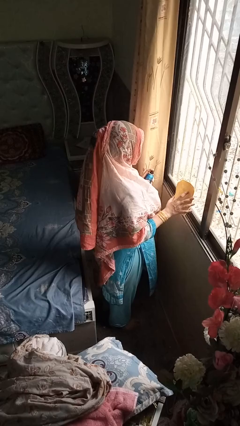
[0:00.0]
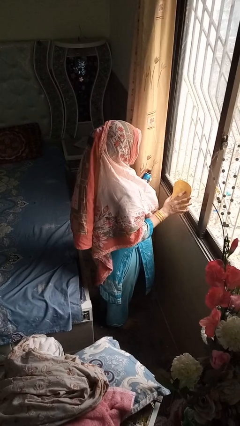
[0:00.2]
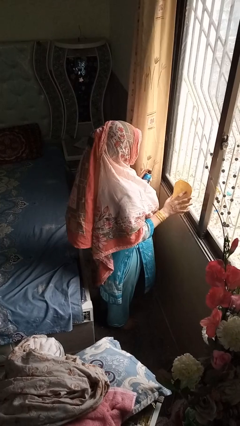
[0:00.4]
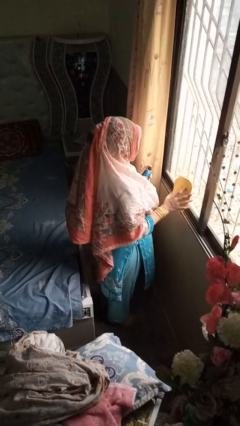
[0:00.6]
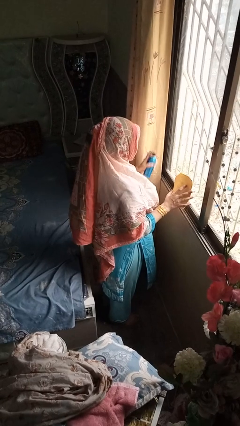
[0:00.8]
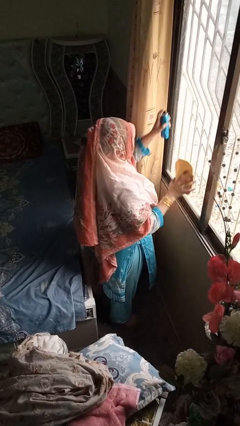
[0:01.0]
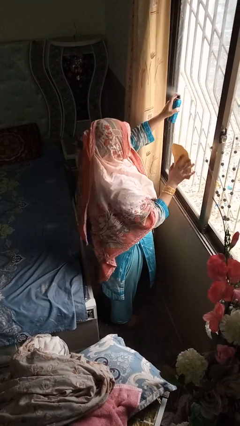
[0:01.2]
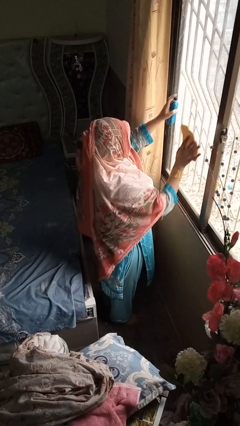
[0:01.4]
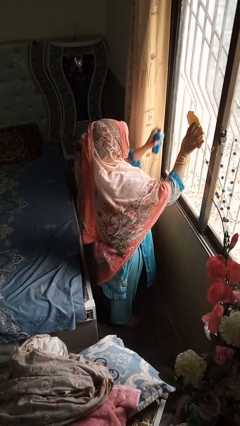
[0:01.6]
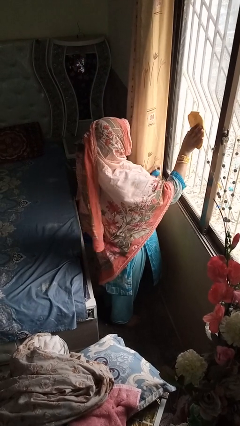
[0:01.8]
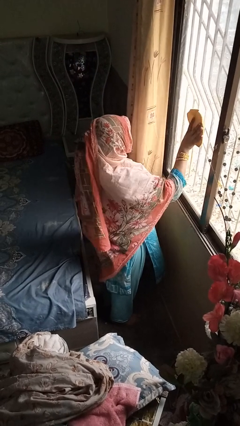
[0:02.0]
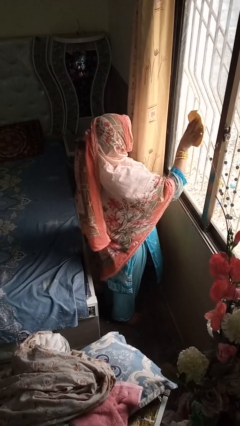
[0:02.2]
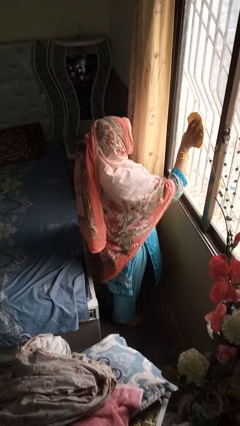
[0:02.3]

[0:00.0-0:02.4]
person sprays from bottle

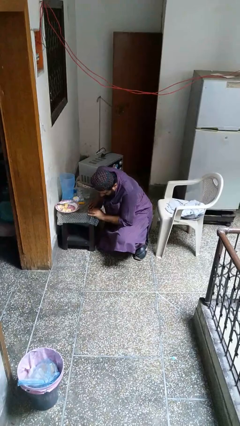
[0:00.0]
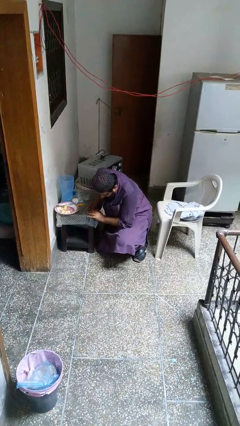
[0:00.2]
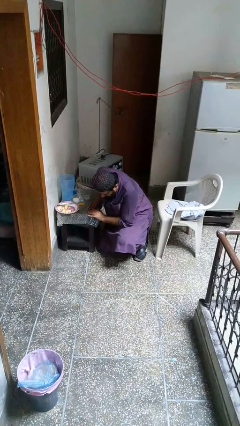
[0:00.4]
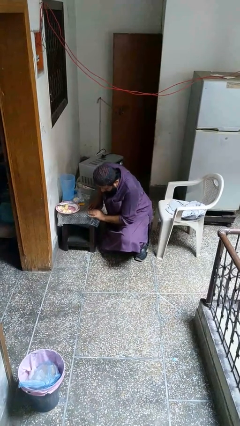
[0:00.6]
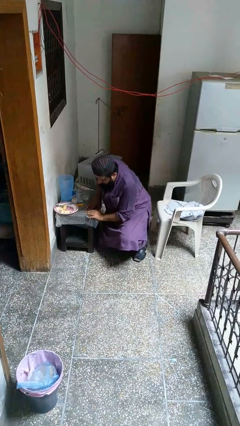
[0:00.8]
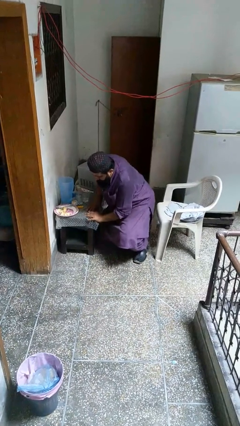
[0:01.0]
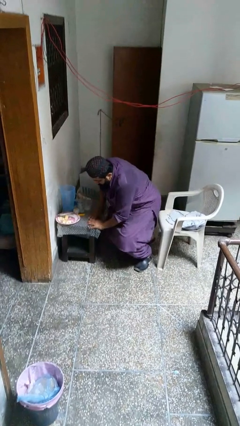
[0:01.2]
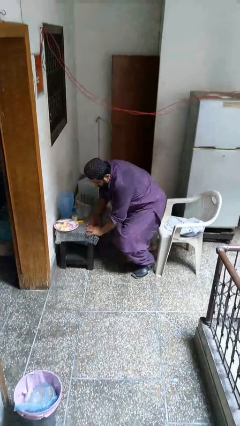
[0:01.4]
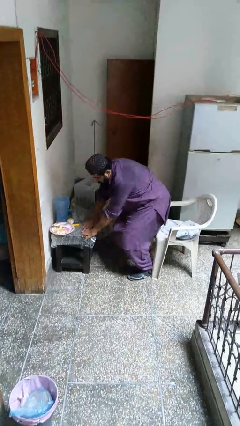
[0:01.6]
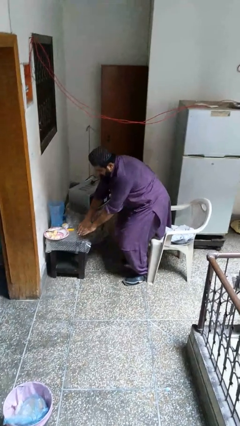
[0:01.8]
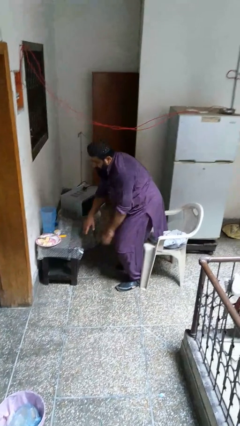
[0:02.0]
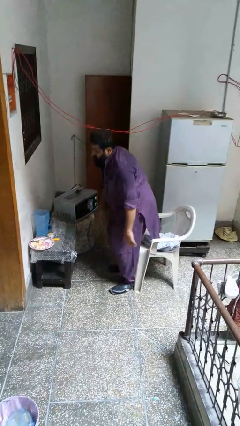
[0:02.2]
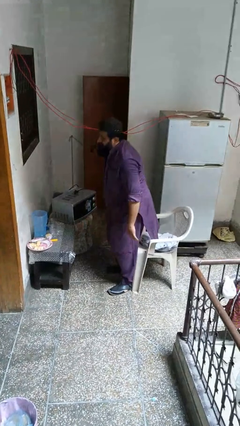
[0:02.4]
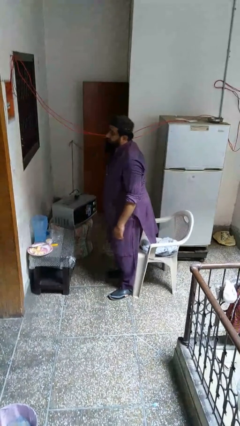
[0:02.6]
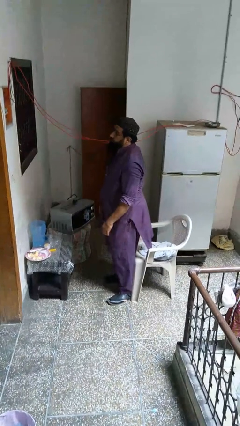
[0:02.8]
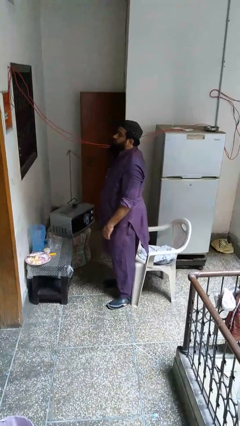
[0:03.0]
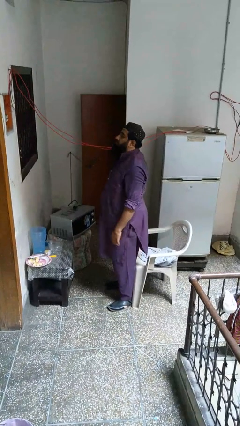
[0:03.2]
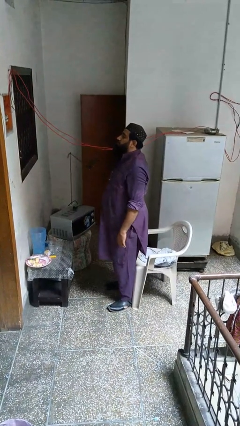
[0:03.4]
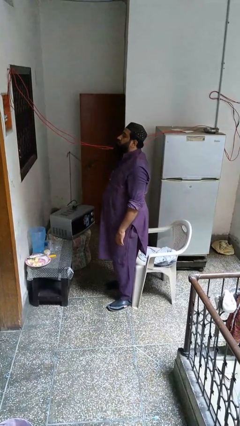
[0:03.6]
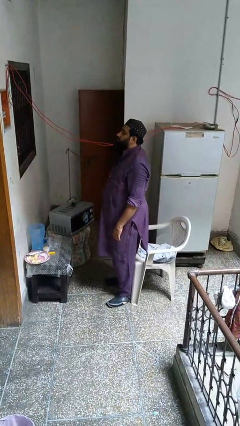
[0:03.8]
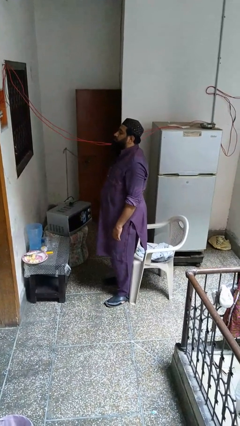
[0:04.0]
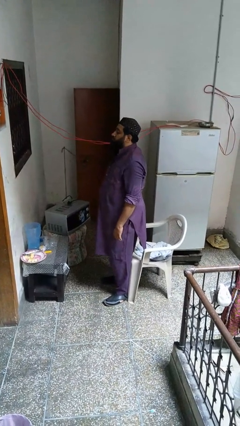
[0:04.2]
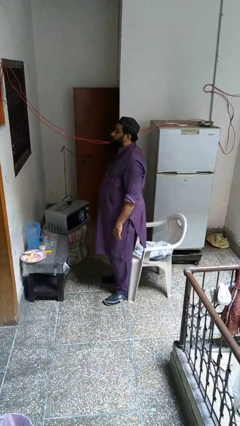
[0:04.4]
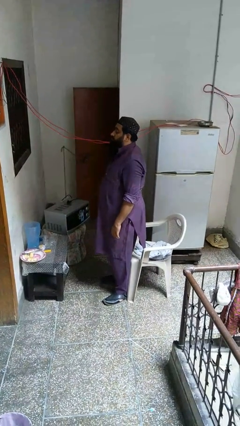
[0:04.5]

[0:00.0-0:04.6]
person stands up from floor

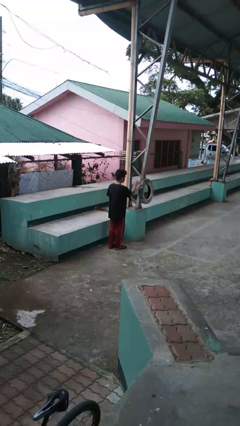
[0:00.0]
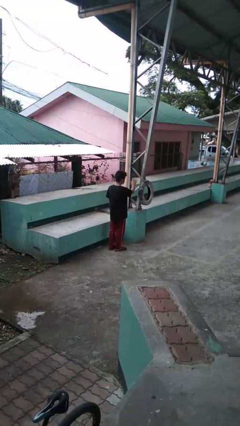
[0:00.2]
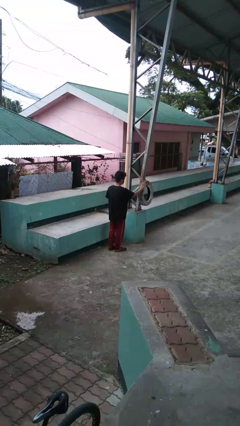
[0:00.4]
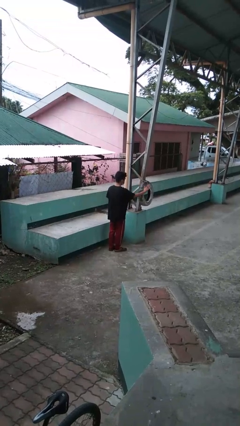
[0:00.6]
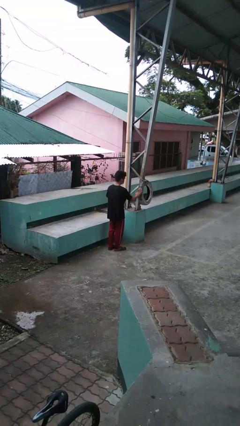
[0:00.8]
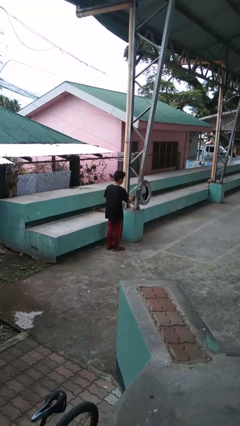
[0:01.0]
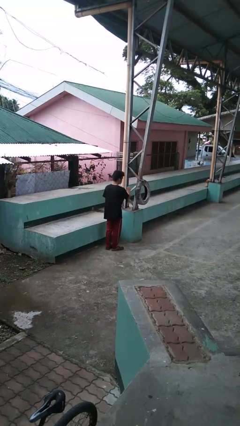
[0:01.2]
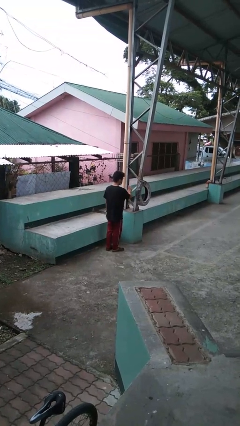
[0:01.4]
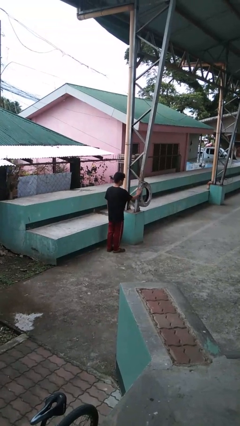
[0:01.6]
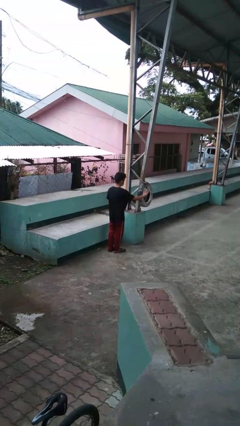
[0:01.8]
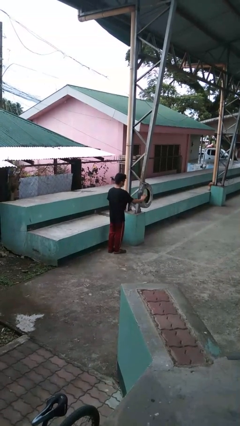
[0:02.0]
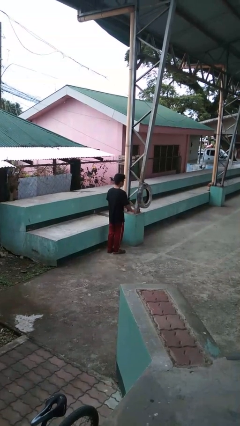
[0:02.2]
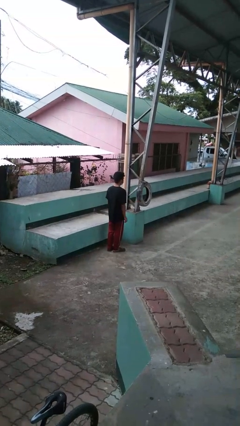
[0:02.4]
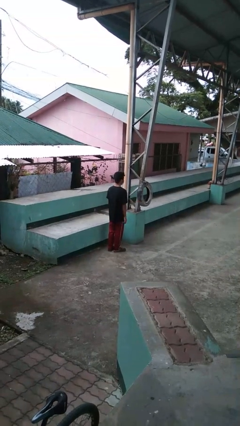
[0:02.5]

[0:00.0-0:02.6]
person waves hand over object

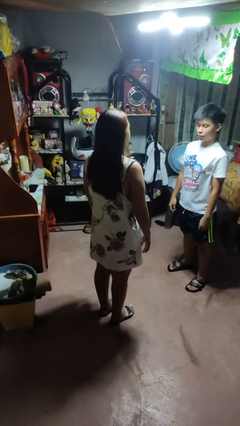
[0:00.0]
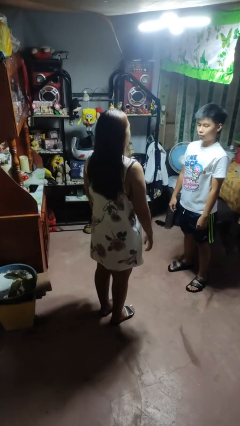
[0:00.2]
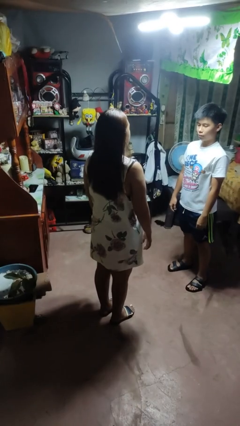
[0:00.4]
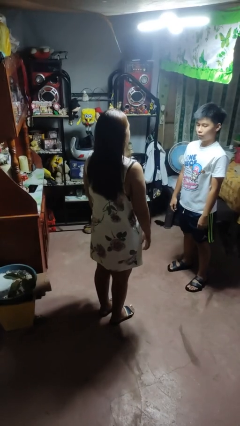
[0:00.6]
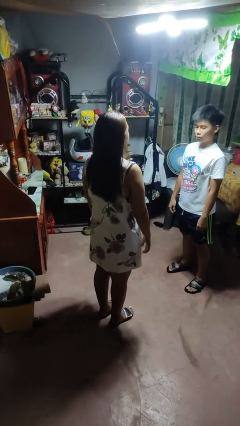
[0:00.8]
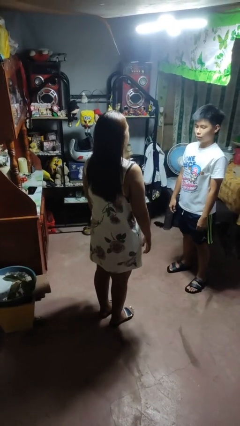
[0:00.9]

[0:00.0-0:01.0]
person grabs person by forearm

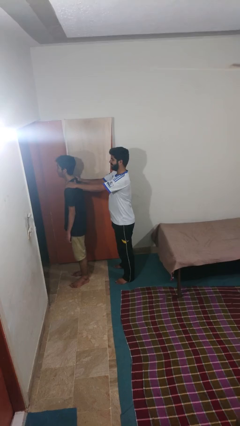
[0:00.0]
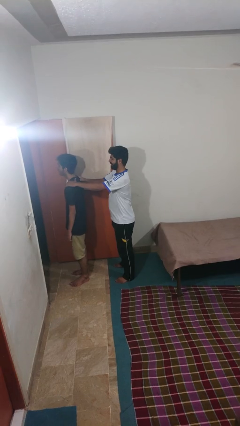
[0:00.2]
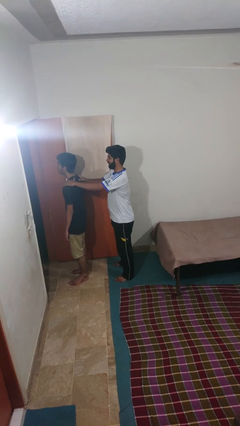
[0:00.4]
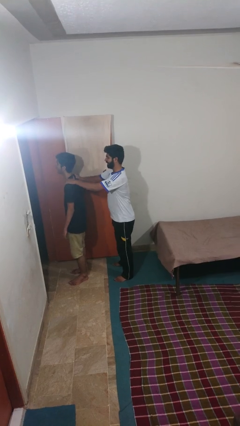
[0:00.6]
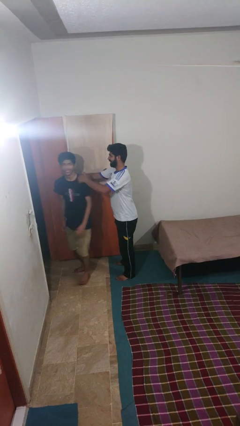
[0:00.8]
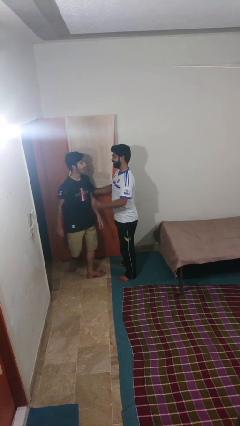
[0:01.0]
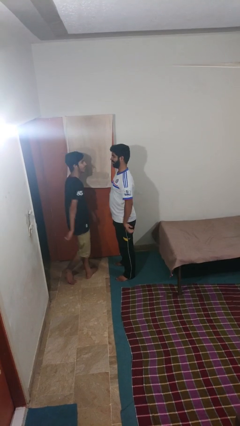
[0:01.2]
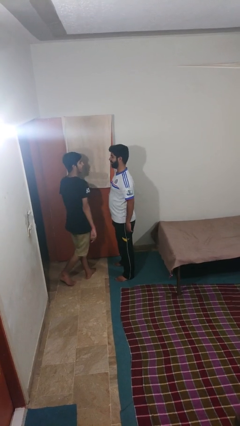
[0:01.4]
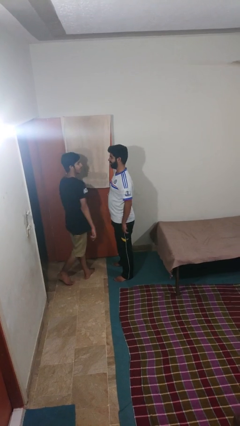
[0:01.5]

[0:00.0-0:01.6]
person spins person around

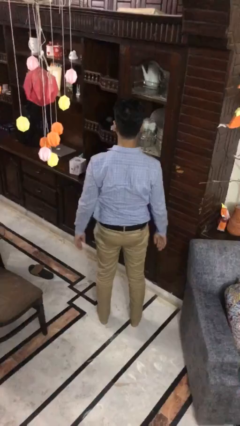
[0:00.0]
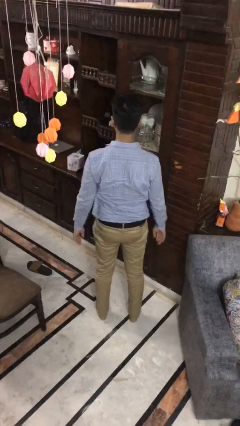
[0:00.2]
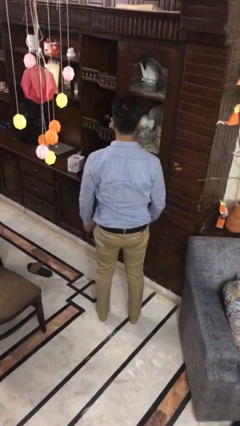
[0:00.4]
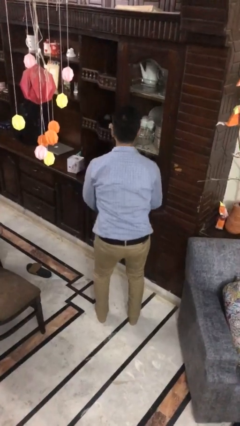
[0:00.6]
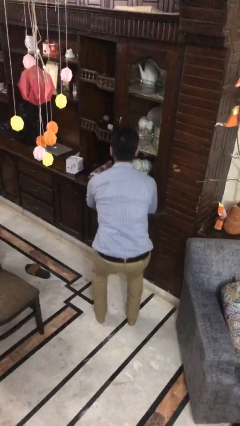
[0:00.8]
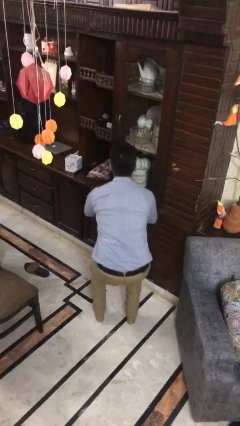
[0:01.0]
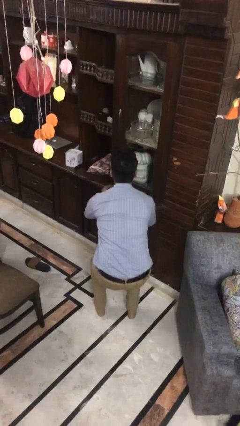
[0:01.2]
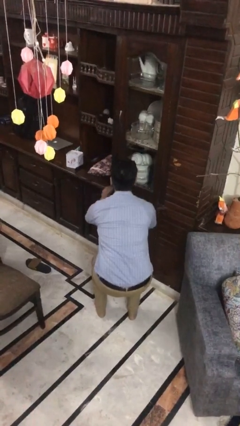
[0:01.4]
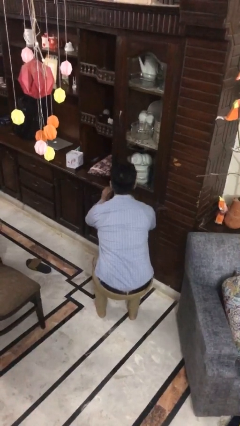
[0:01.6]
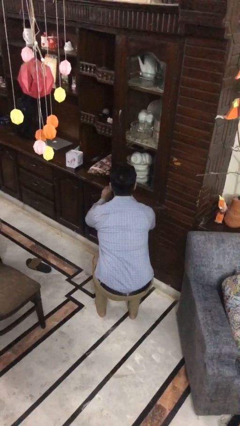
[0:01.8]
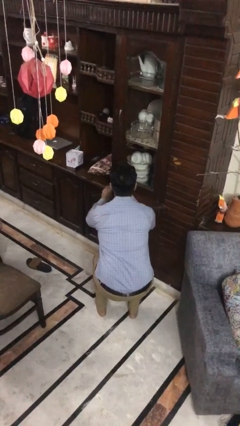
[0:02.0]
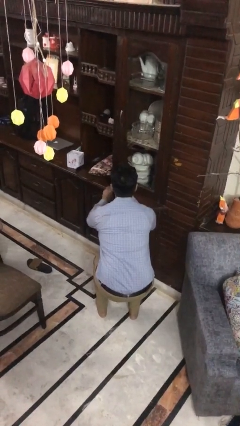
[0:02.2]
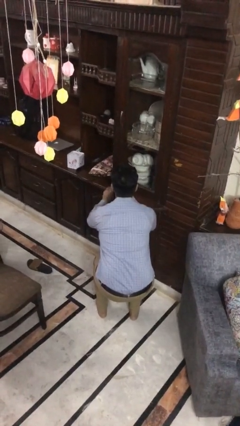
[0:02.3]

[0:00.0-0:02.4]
person squats

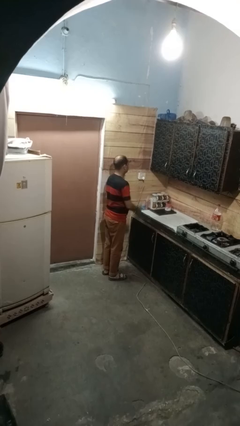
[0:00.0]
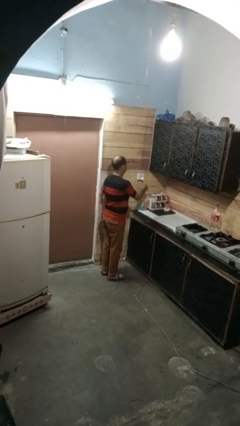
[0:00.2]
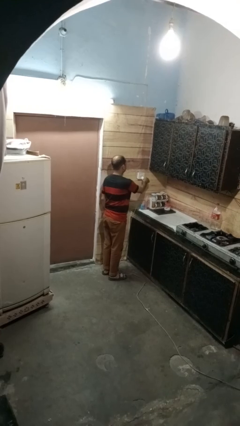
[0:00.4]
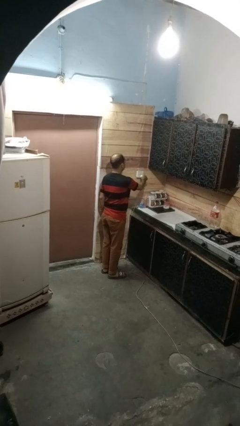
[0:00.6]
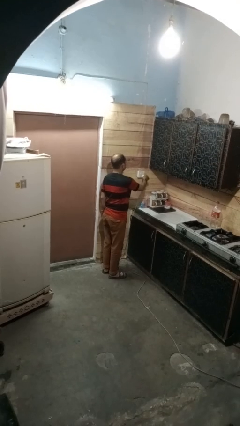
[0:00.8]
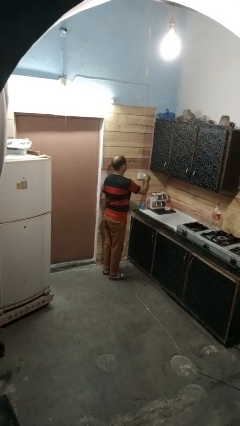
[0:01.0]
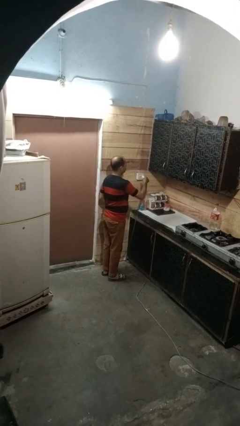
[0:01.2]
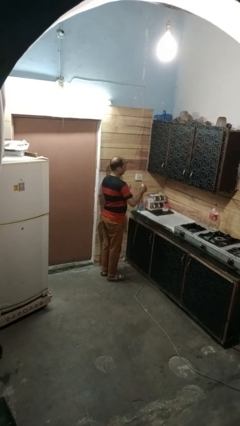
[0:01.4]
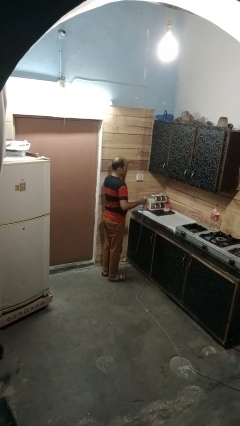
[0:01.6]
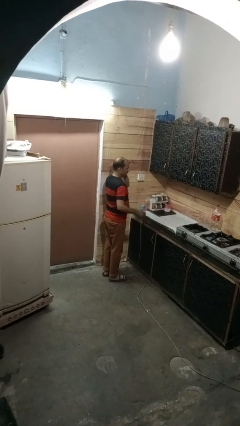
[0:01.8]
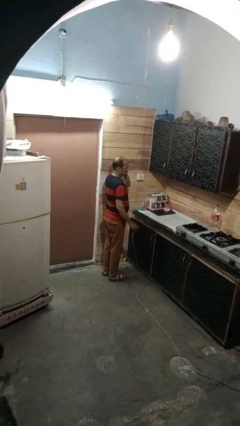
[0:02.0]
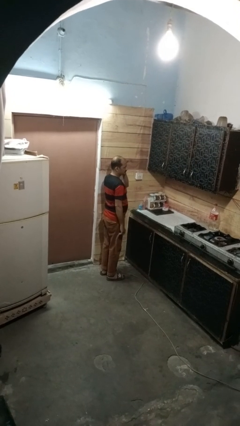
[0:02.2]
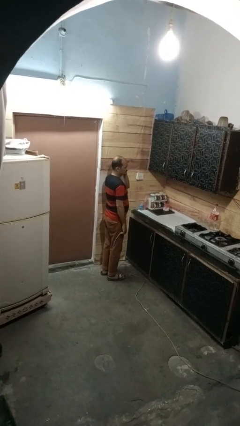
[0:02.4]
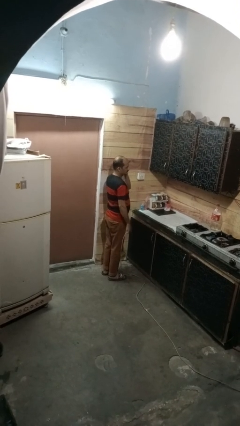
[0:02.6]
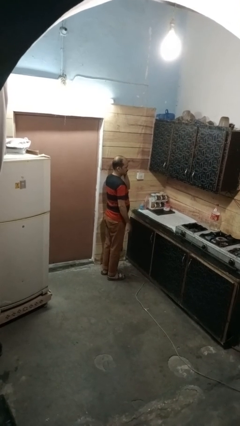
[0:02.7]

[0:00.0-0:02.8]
person unplugs from electrical socket
